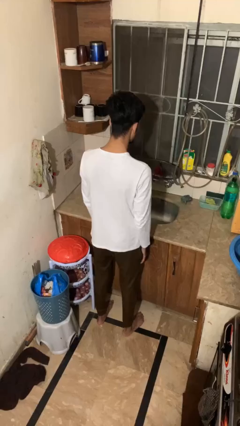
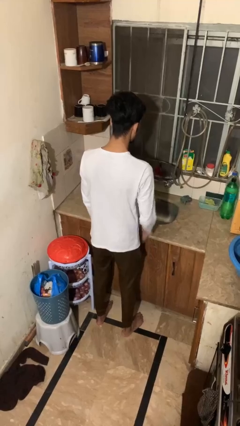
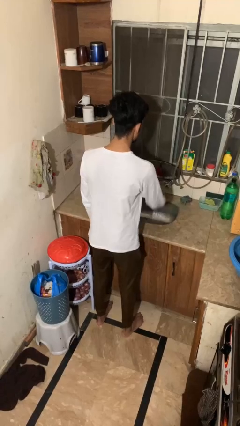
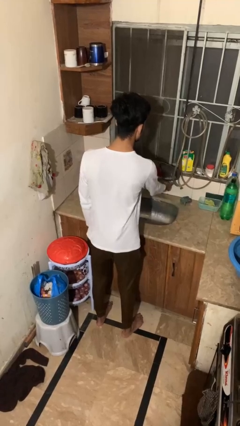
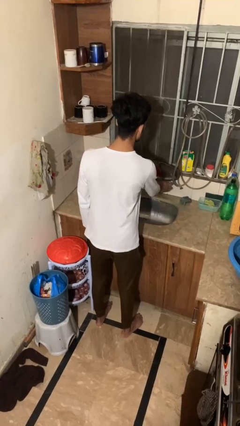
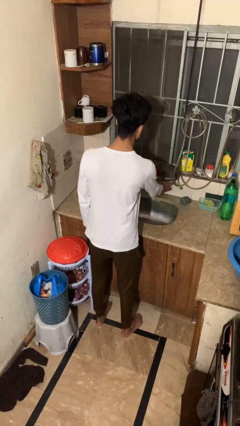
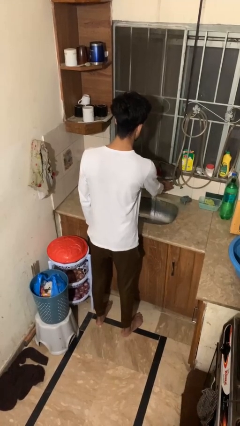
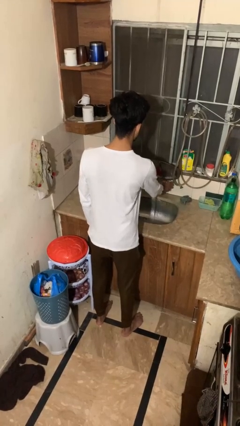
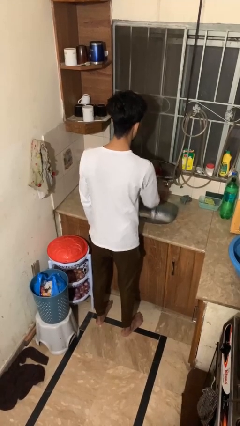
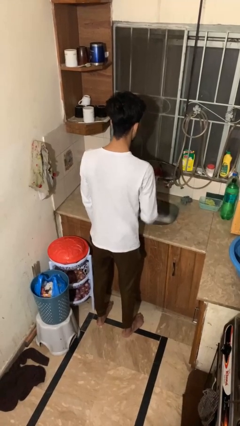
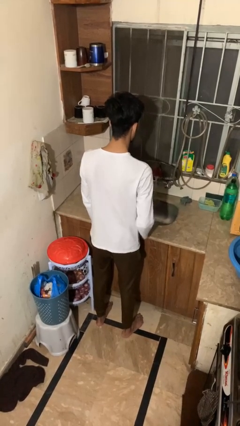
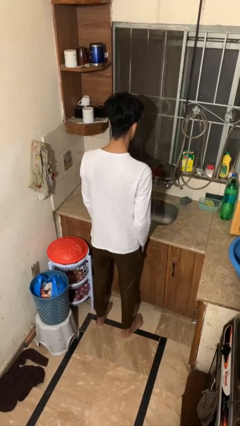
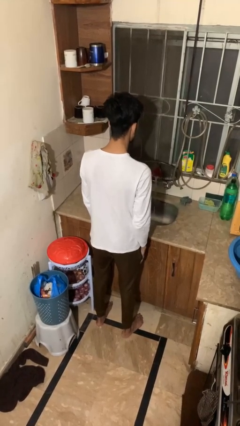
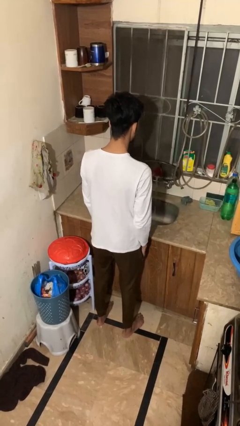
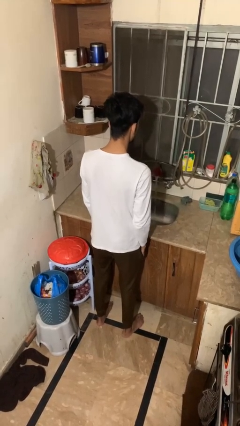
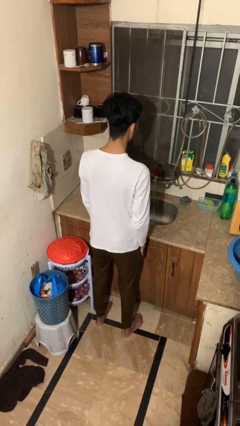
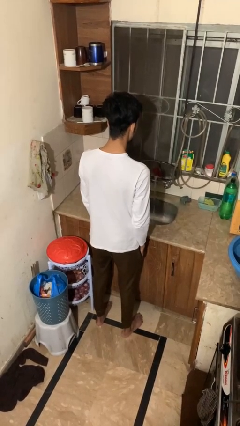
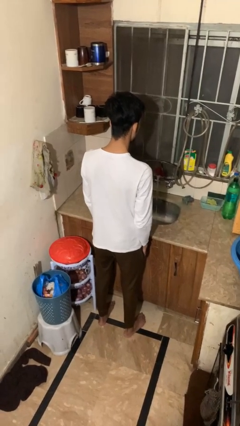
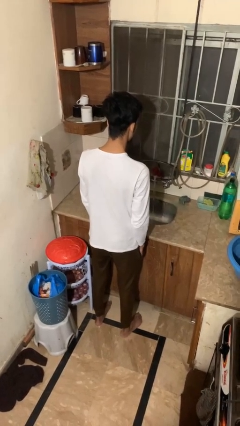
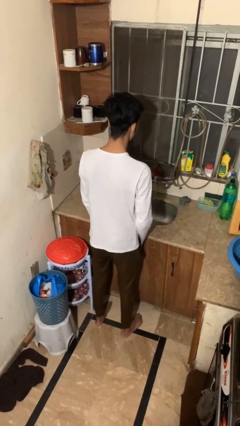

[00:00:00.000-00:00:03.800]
person turns on faucet

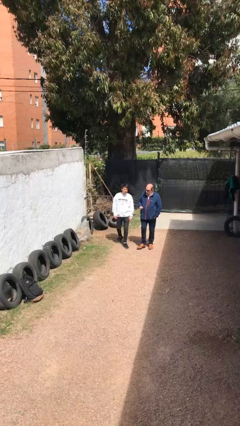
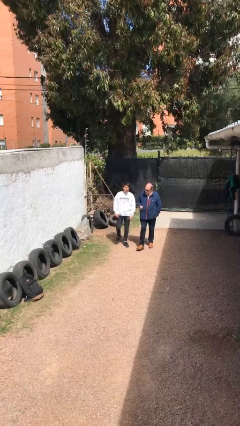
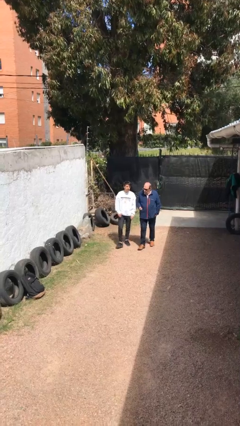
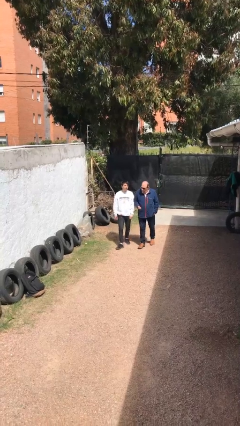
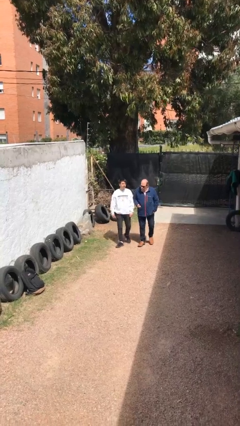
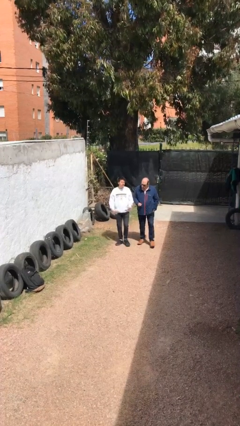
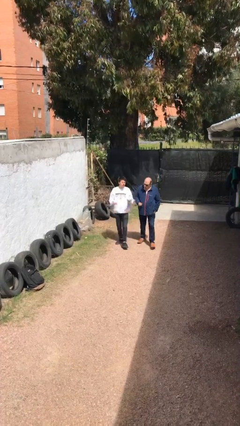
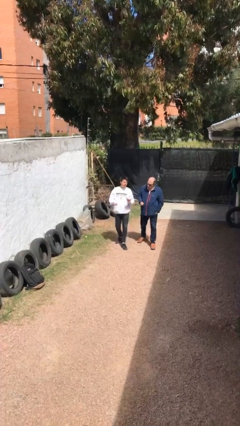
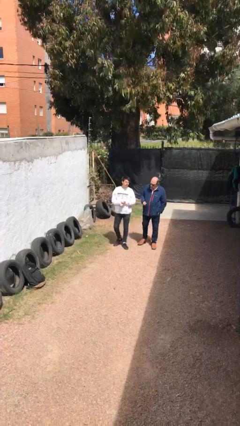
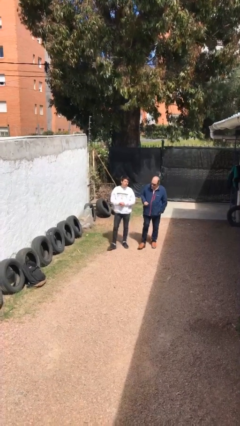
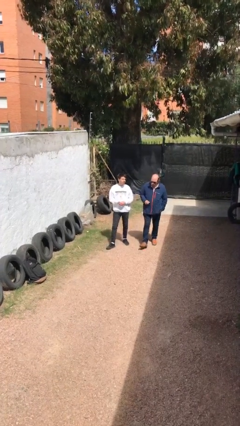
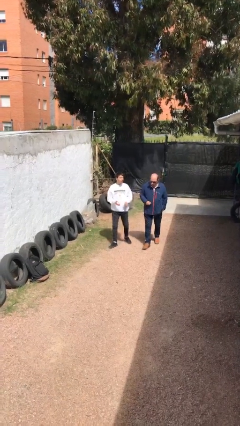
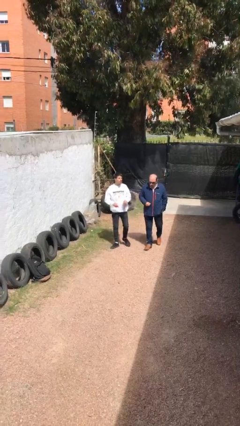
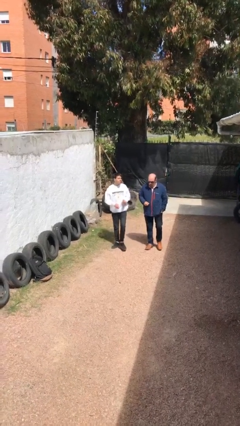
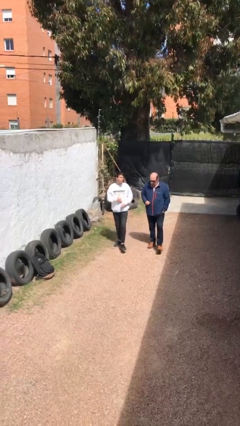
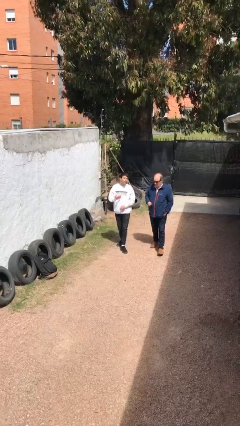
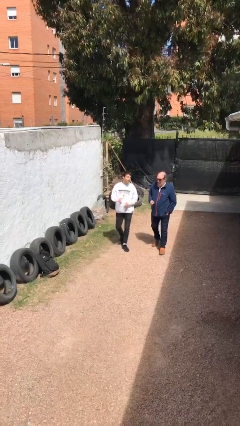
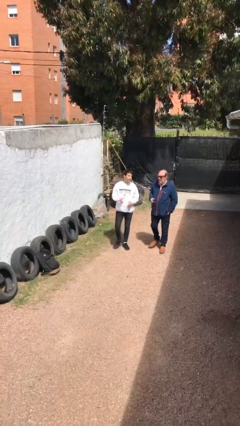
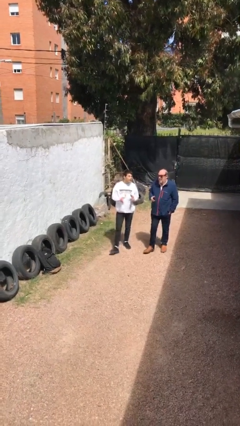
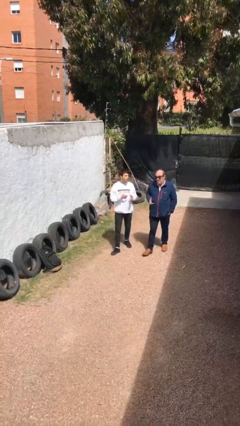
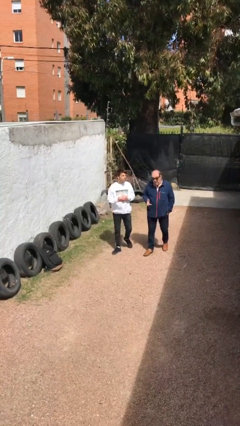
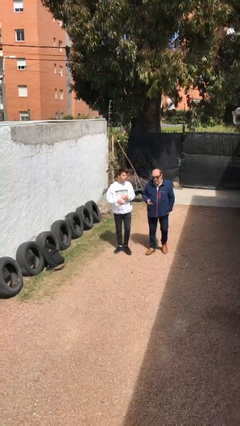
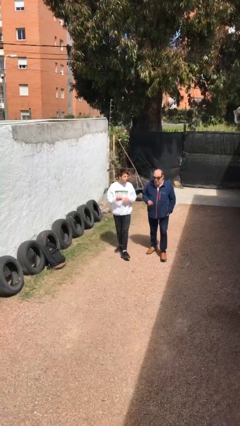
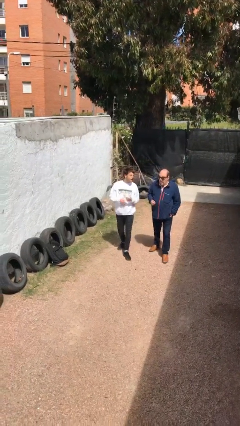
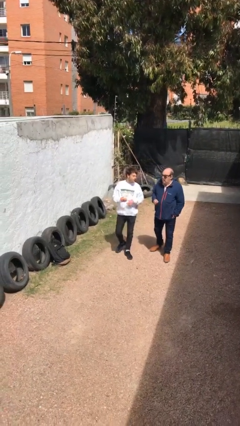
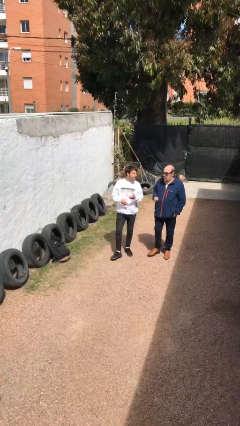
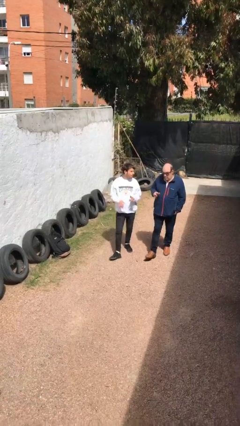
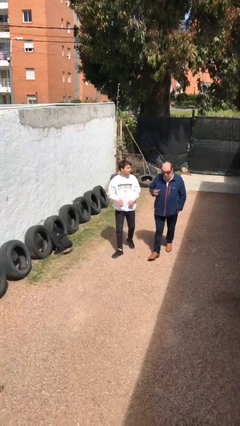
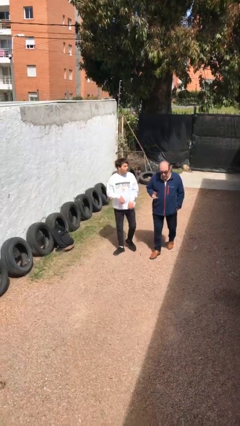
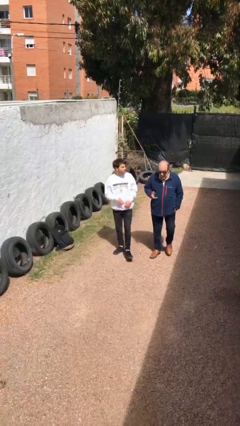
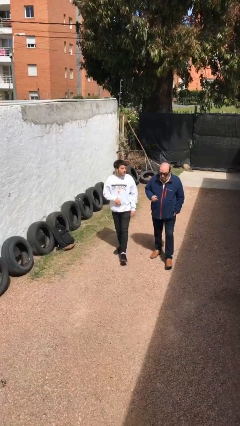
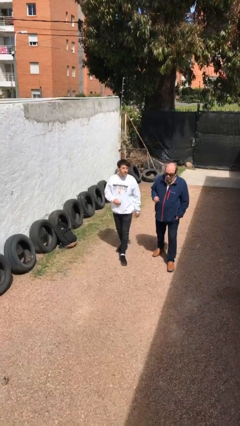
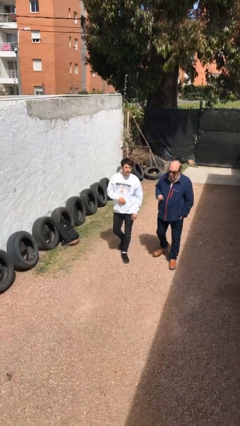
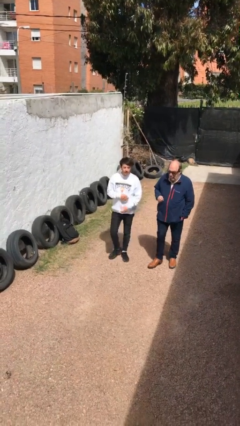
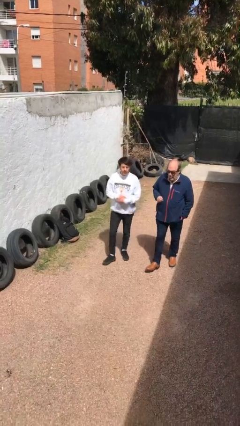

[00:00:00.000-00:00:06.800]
person talks to person

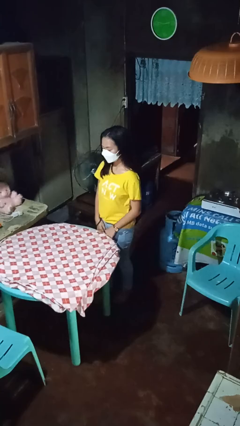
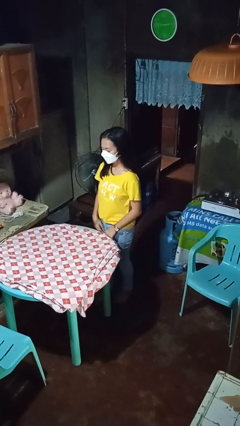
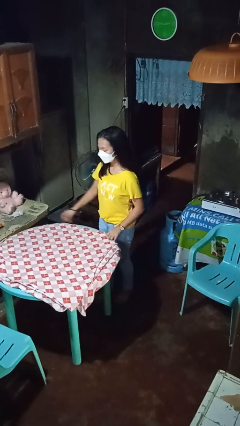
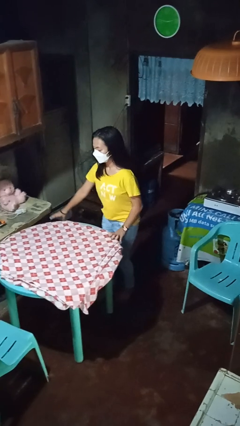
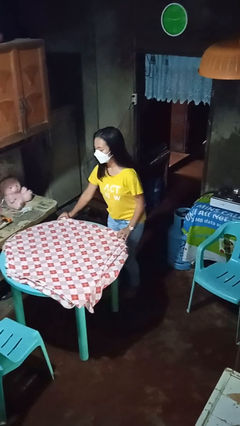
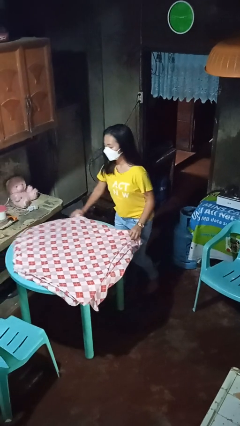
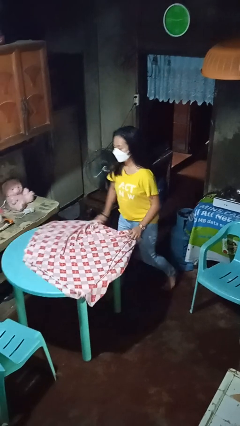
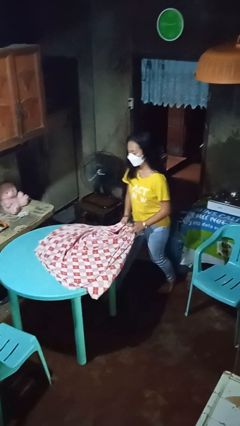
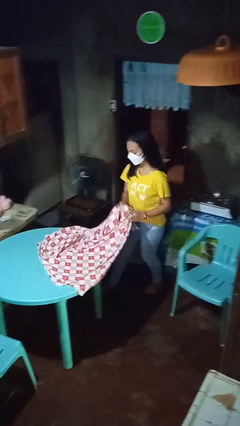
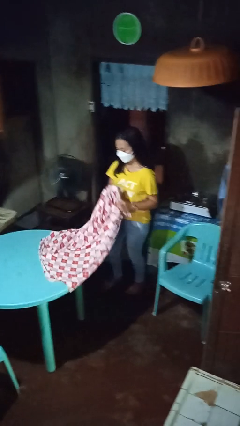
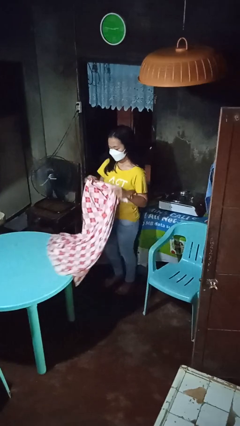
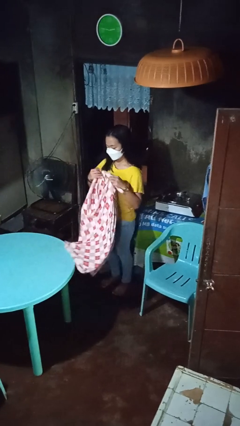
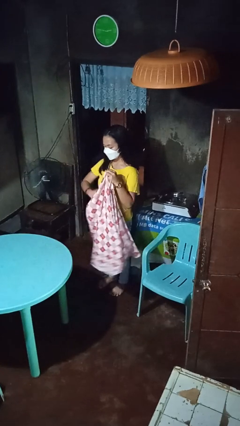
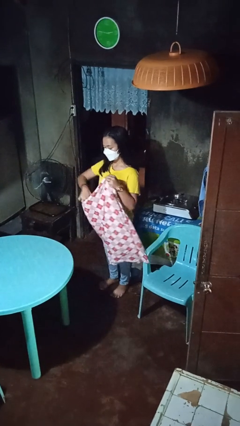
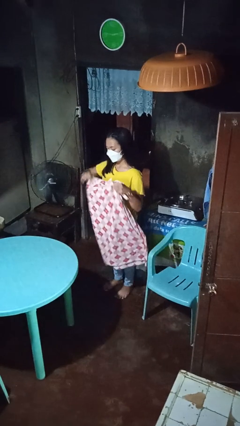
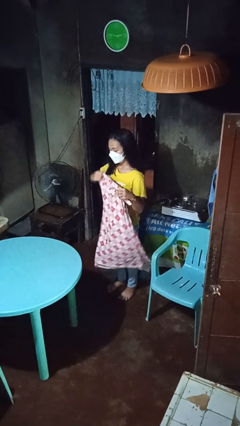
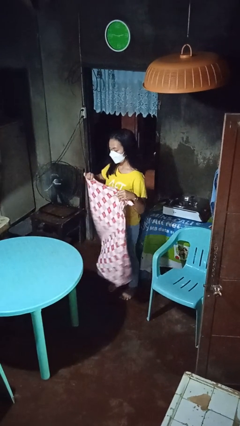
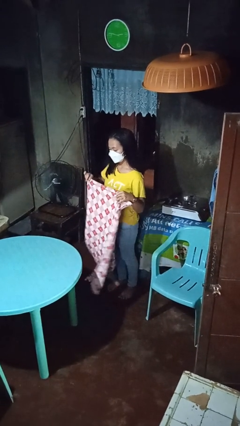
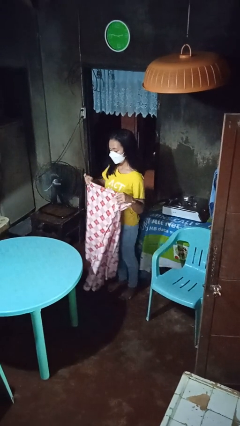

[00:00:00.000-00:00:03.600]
person folds tablecloth

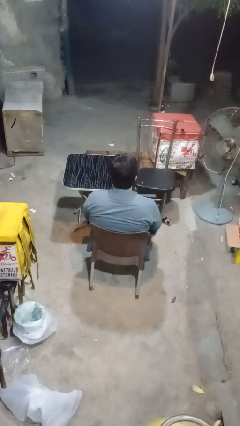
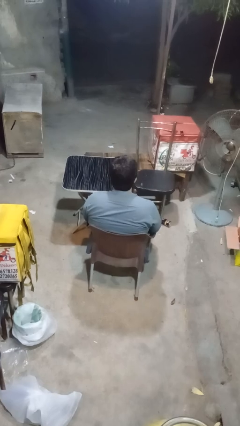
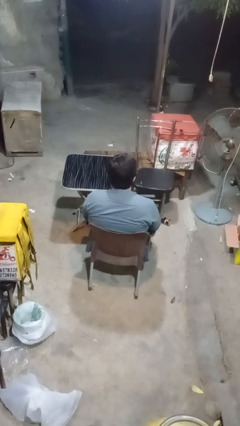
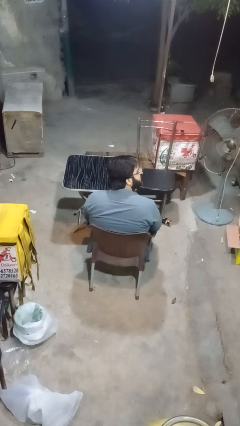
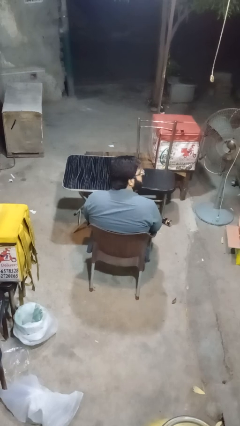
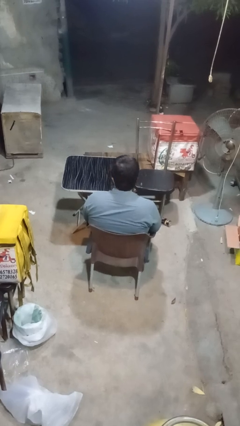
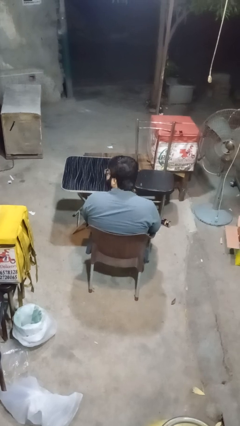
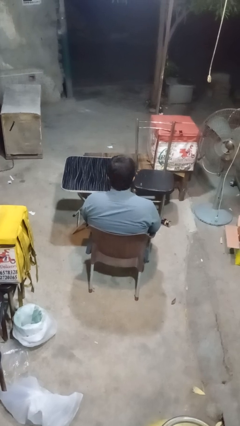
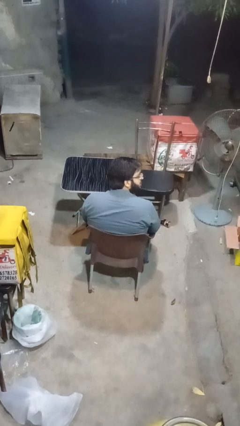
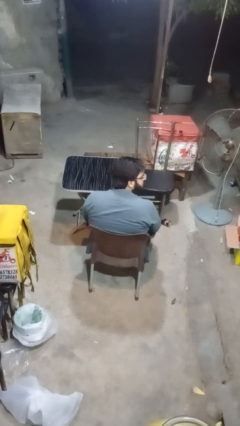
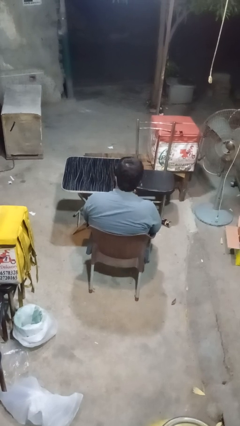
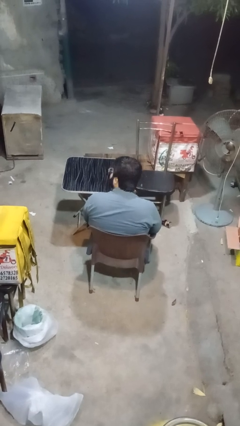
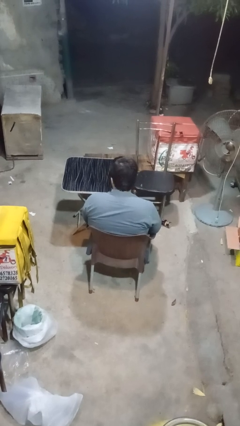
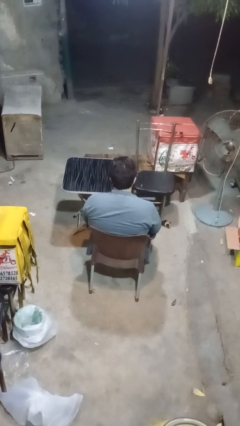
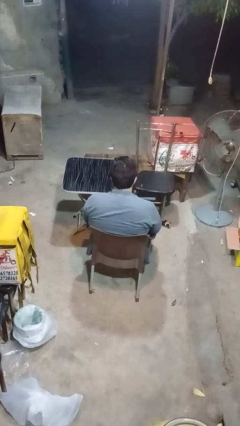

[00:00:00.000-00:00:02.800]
person shakes head

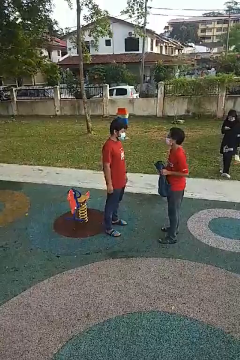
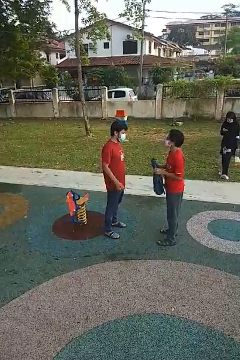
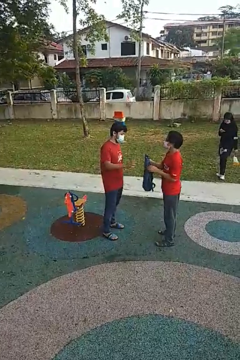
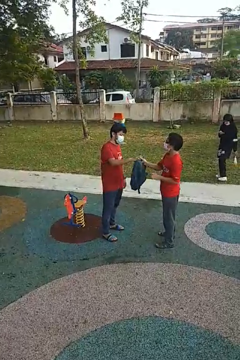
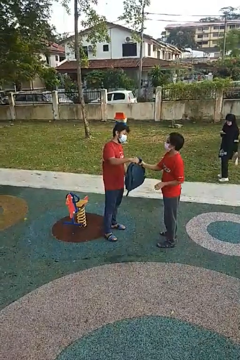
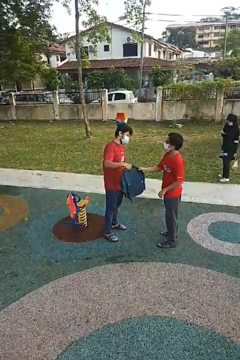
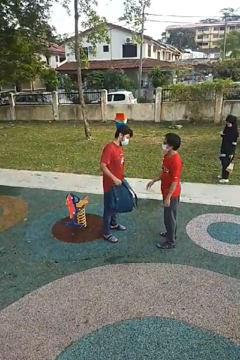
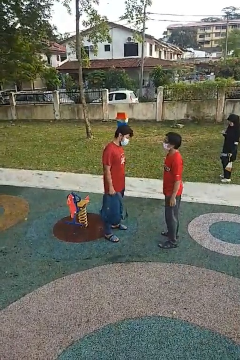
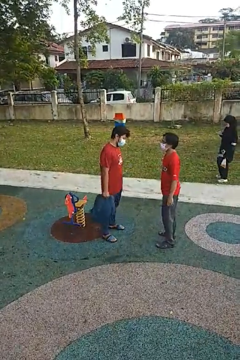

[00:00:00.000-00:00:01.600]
person transfers object to person
